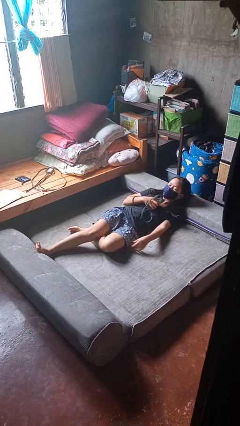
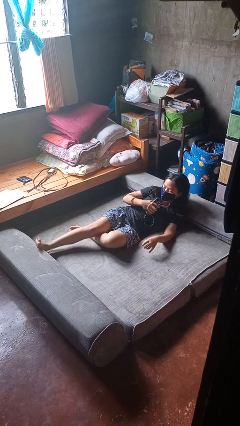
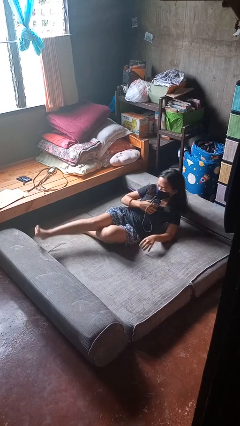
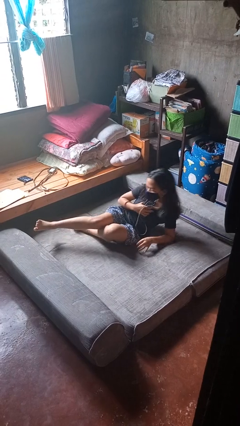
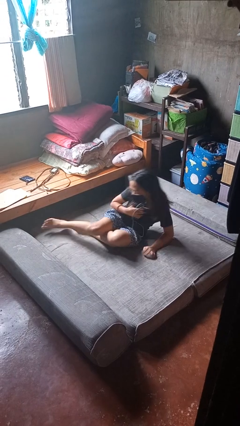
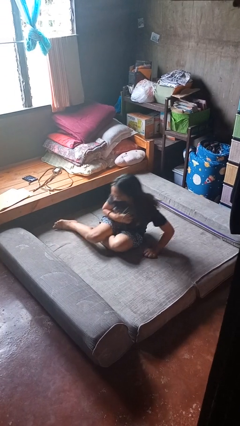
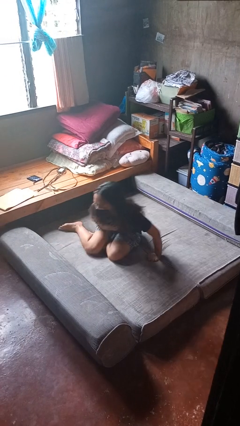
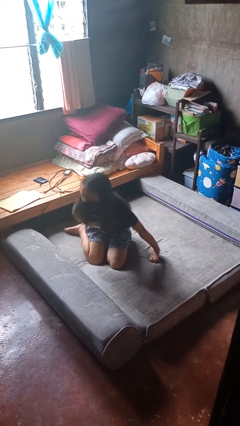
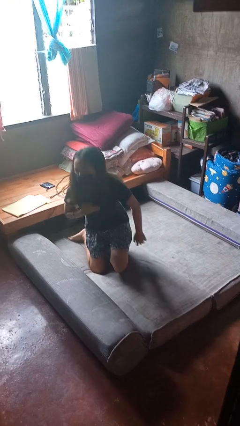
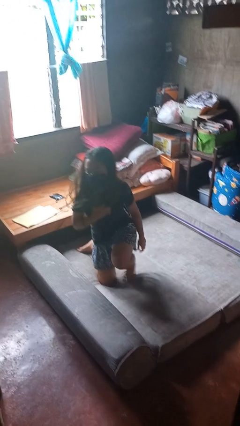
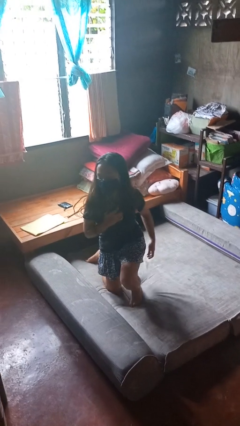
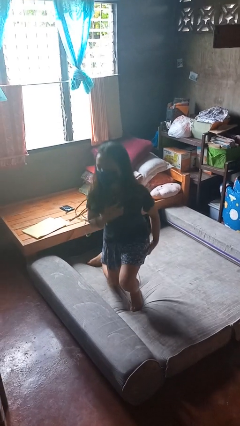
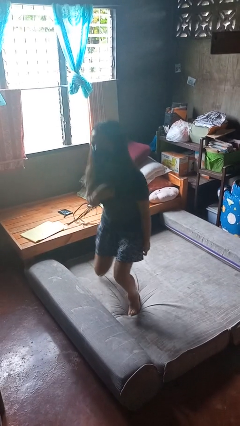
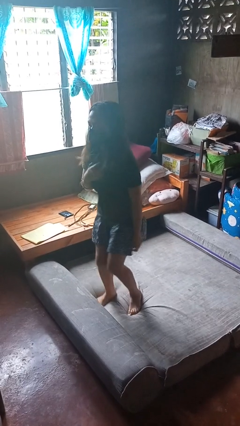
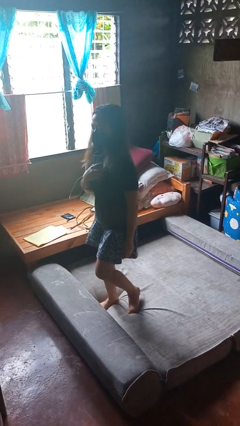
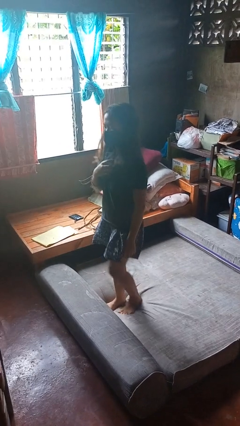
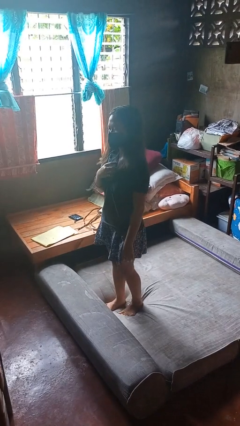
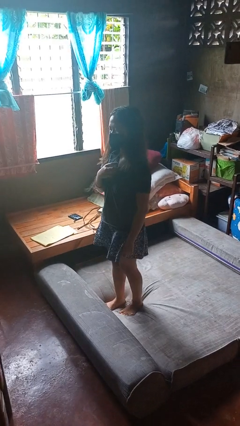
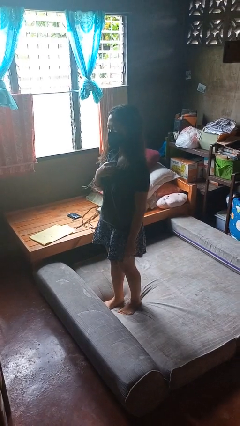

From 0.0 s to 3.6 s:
person stands up

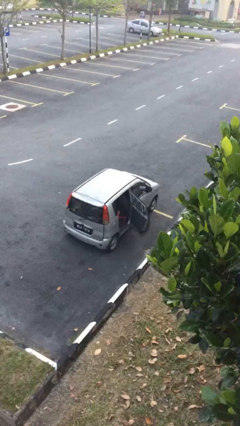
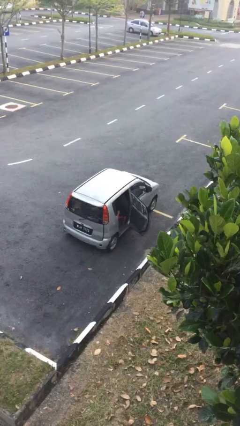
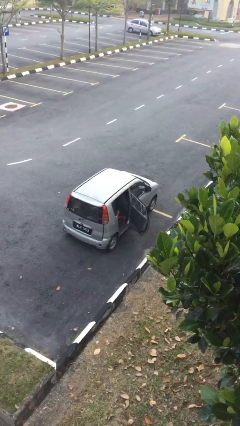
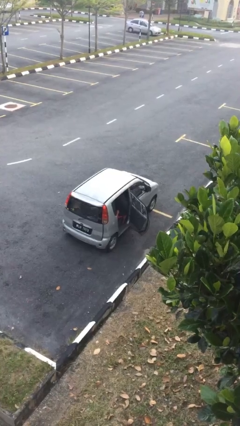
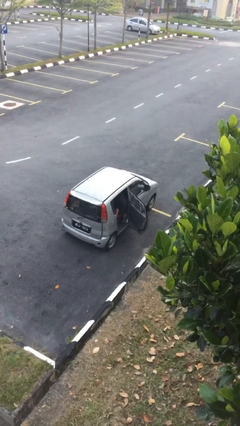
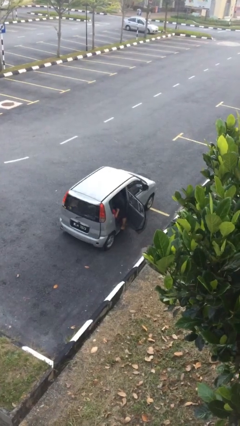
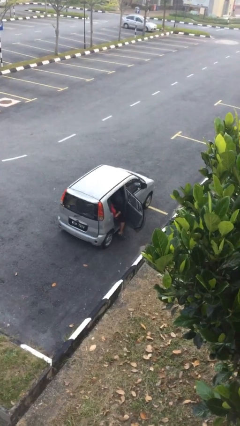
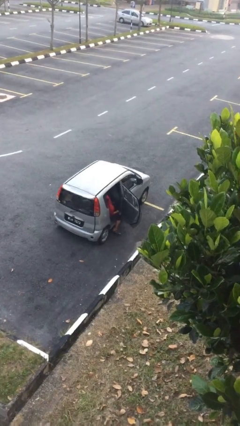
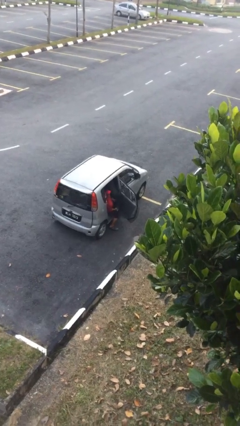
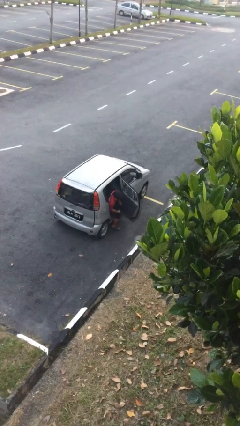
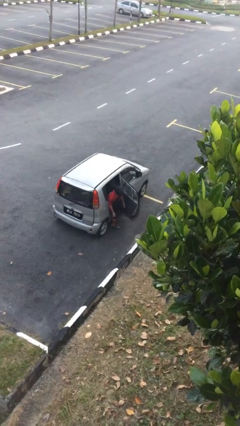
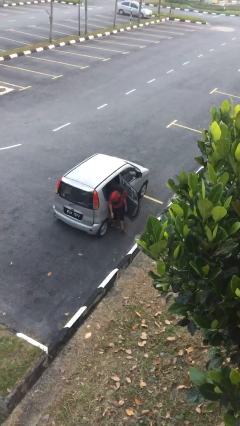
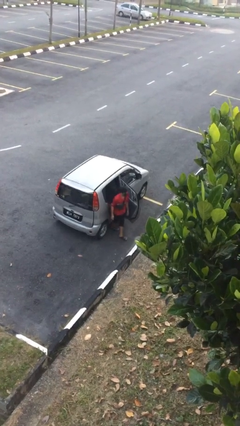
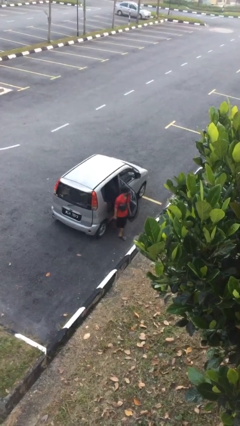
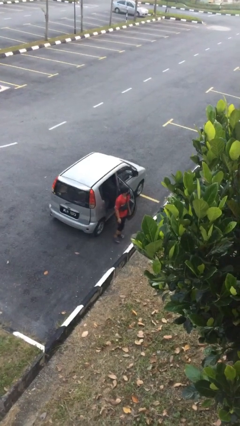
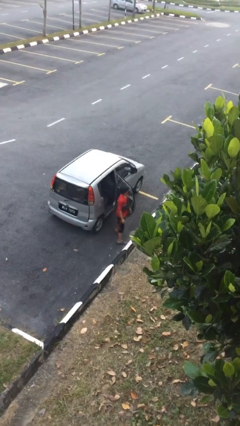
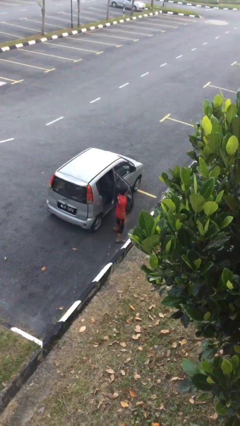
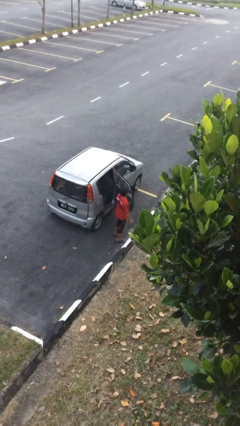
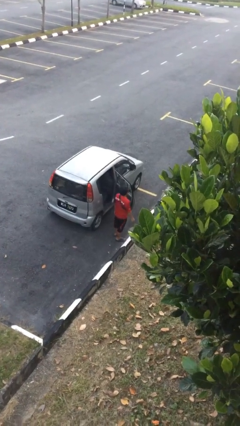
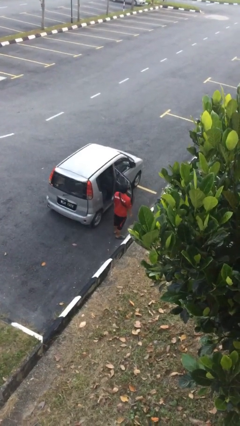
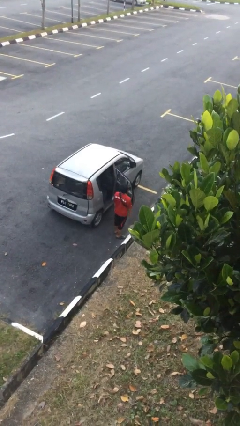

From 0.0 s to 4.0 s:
person exits car

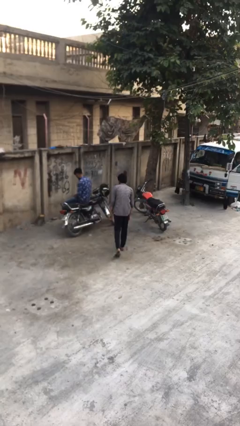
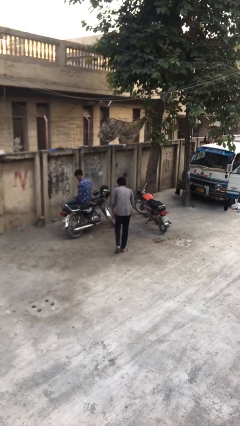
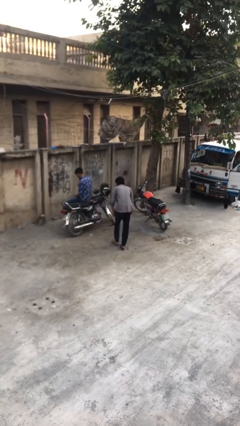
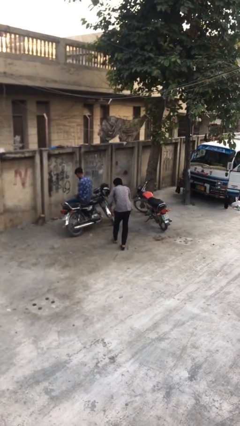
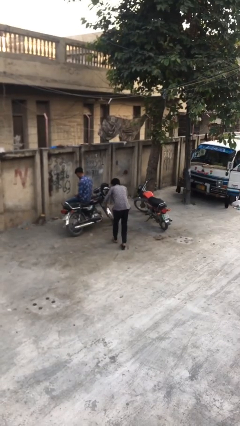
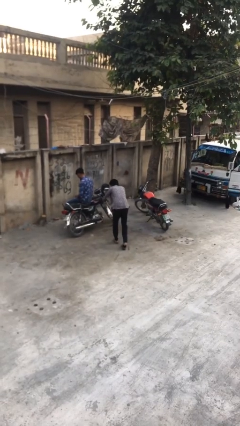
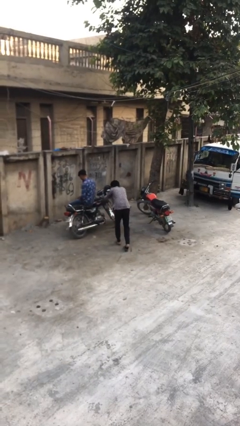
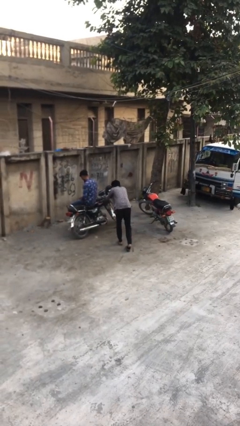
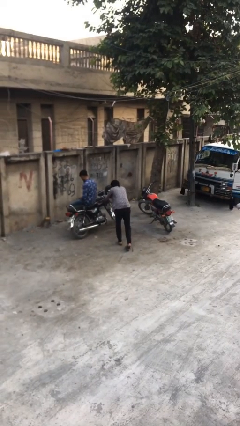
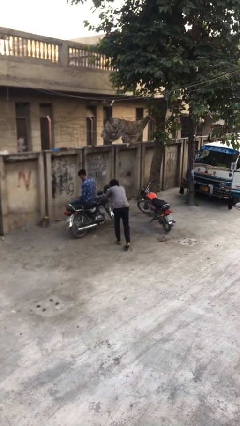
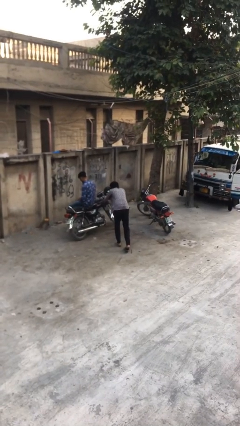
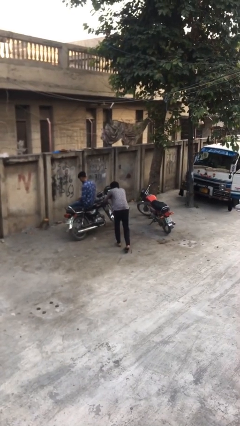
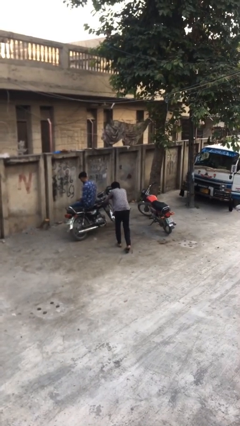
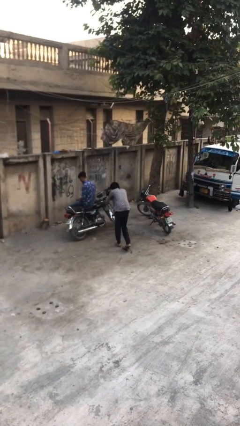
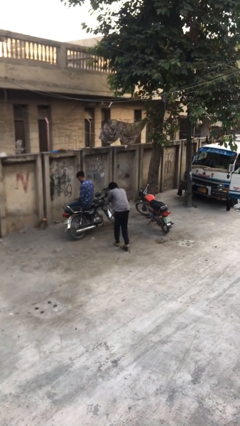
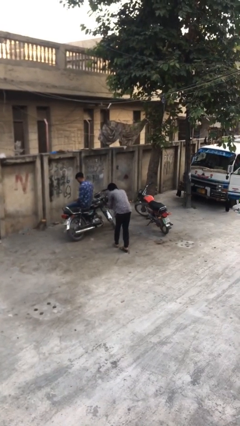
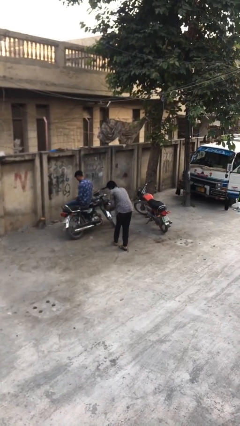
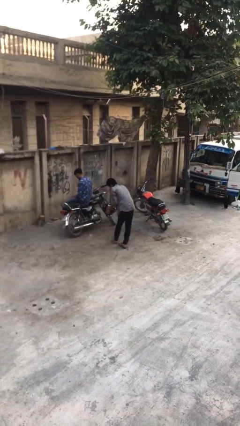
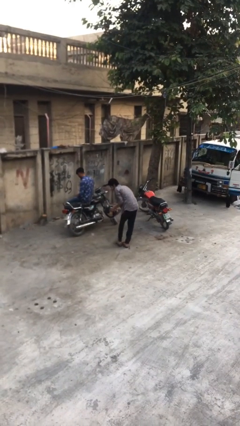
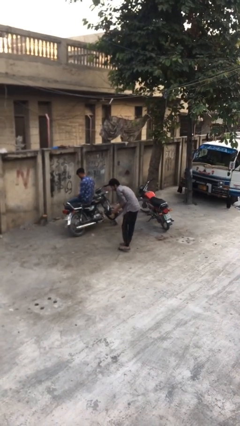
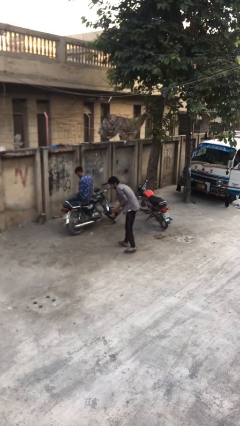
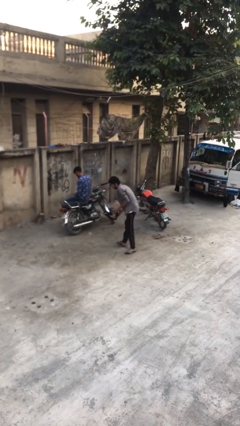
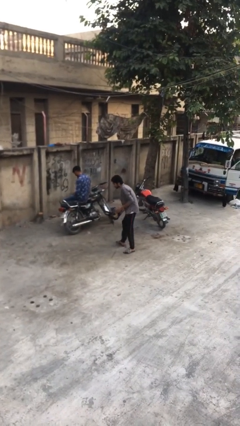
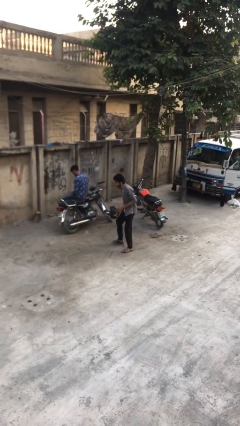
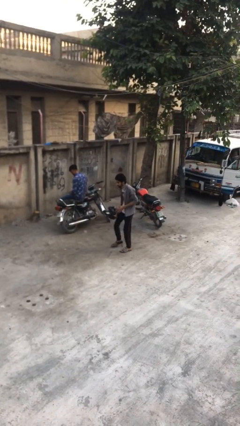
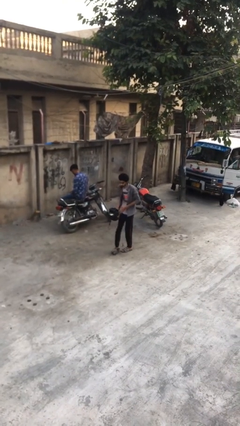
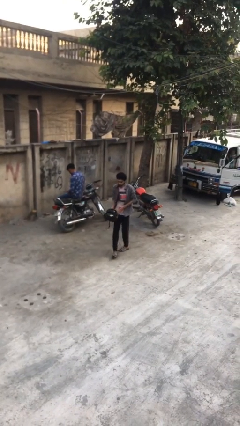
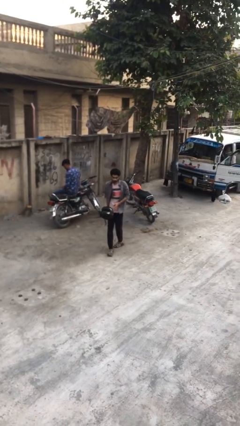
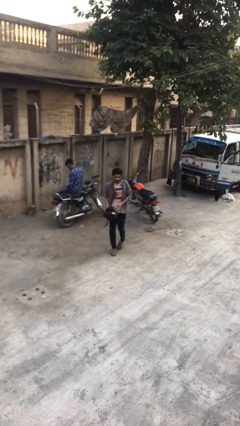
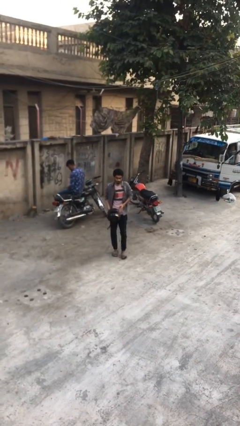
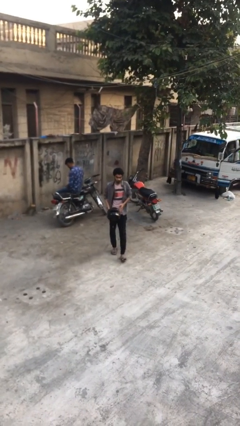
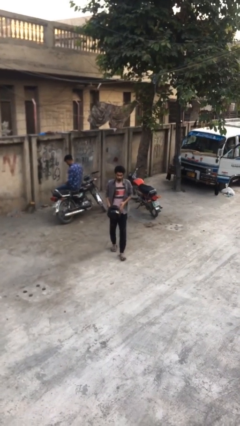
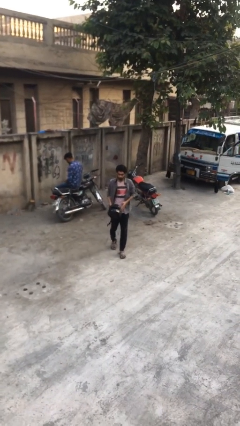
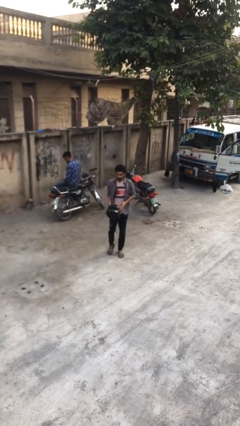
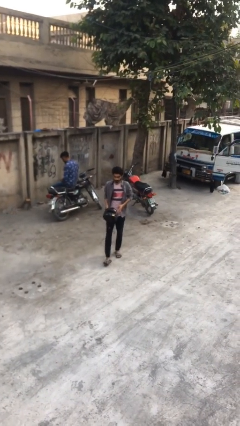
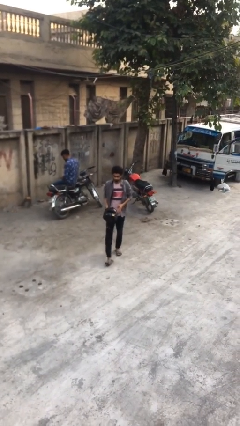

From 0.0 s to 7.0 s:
person steals object from person

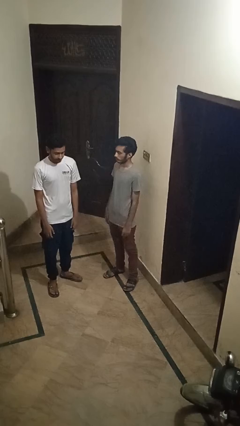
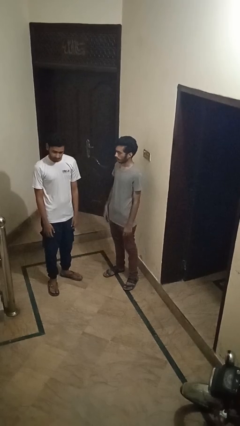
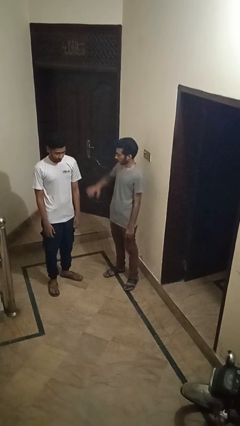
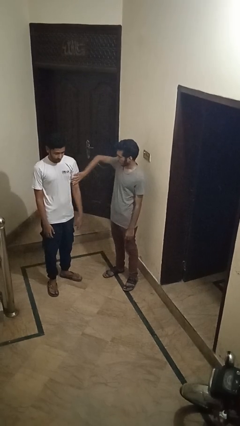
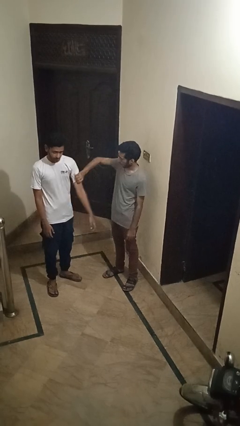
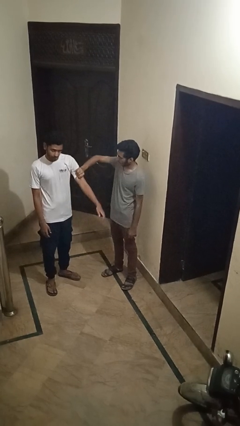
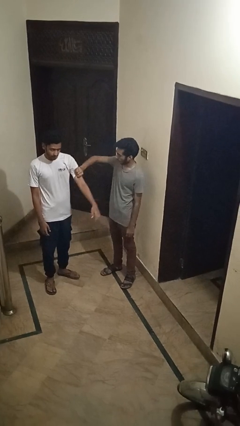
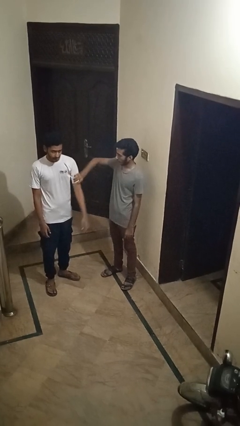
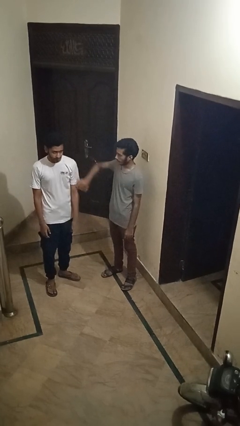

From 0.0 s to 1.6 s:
person grabs person by bicep

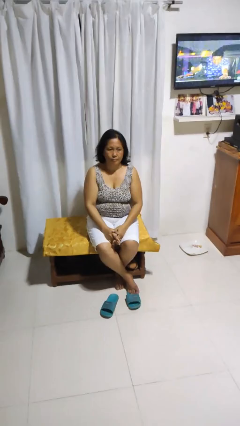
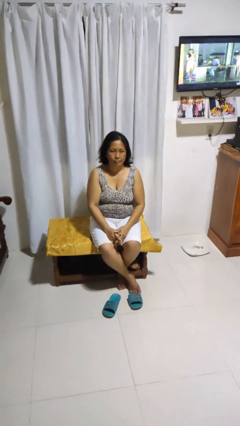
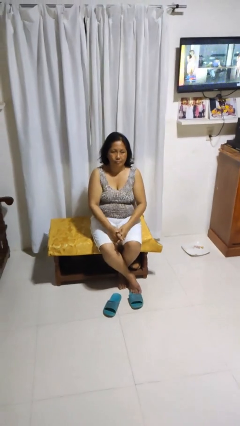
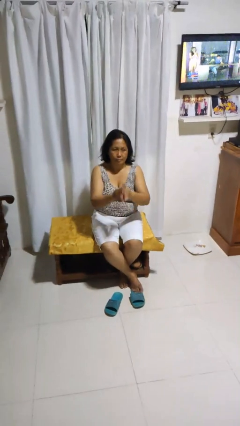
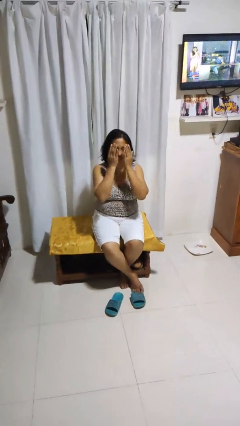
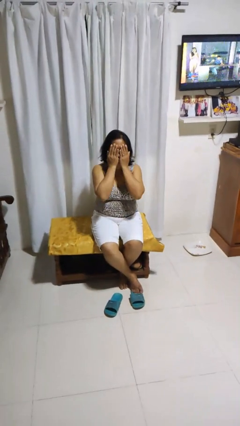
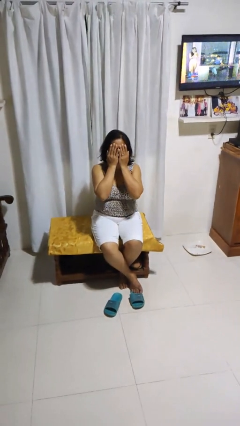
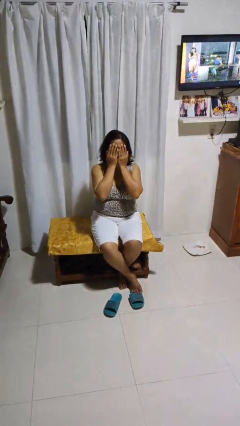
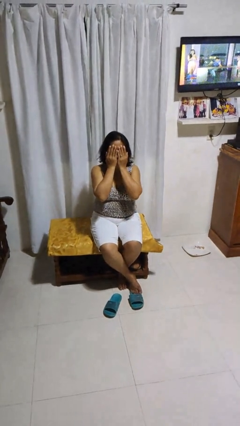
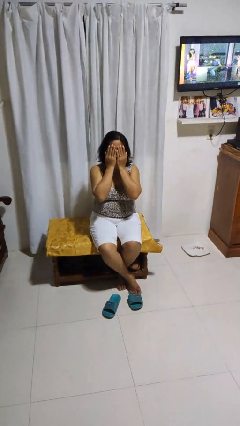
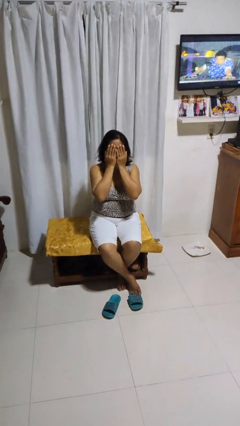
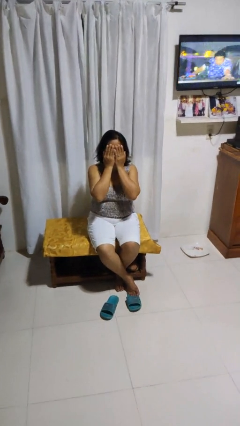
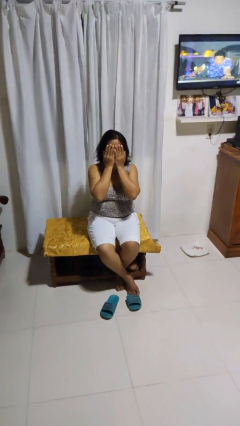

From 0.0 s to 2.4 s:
person covers face with hands
